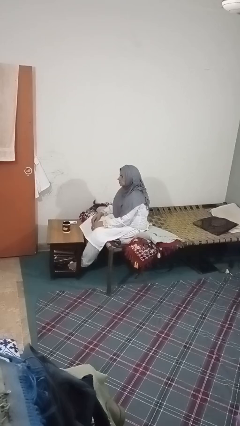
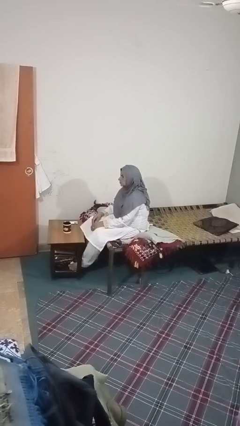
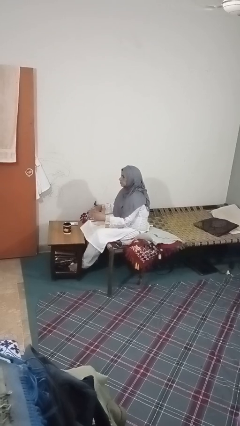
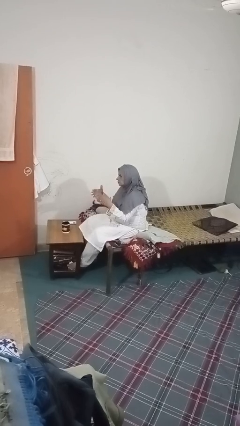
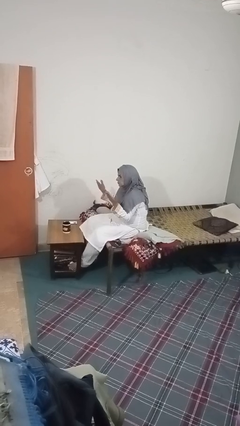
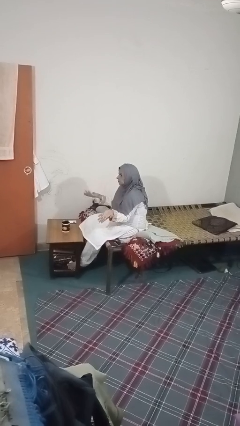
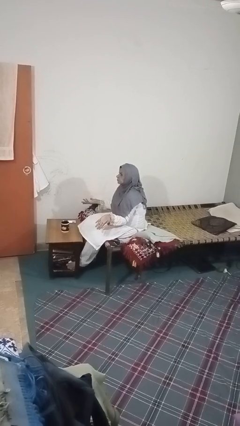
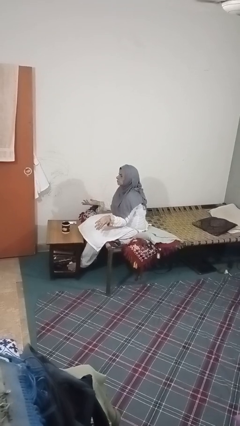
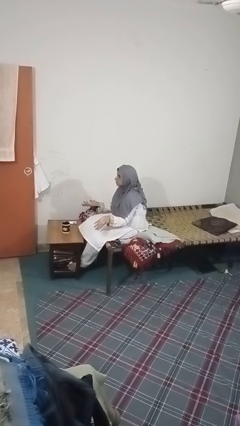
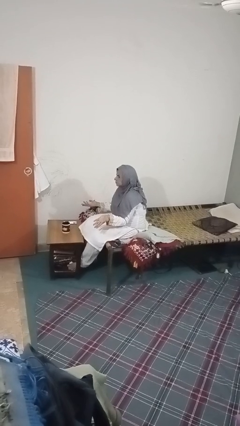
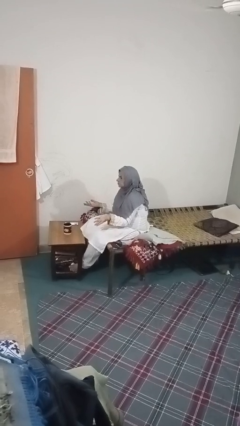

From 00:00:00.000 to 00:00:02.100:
person shrugs

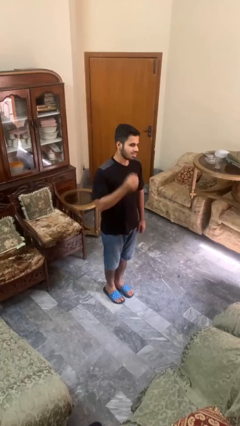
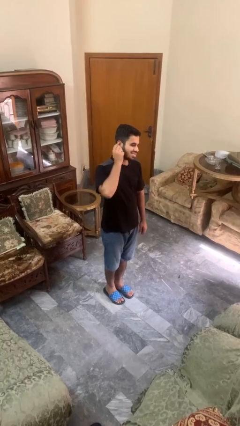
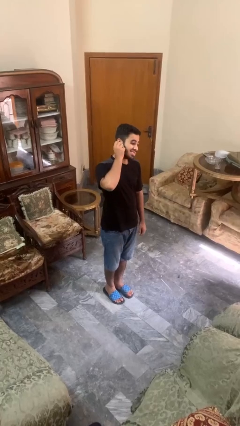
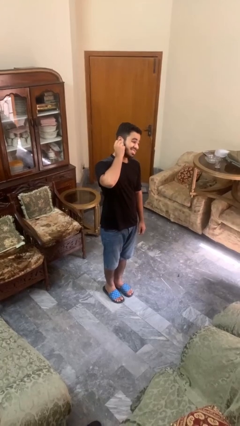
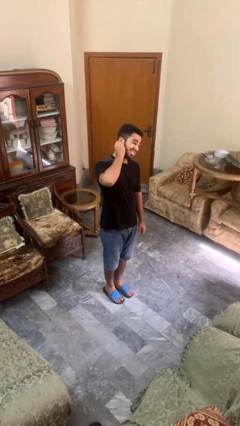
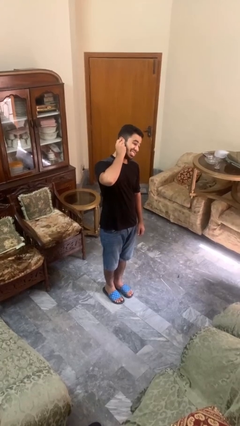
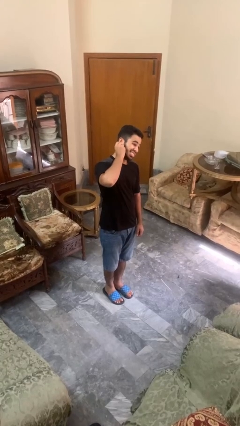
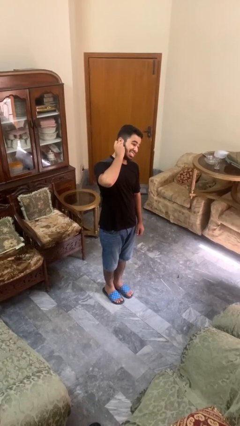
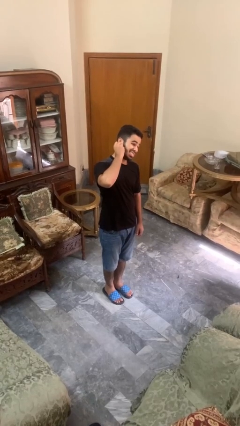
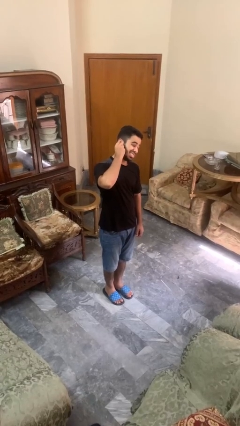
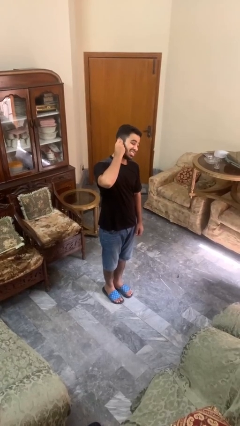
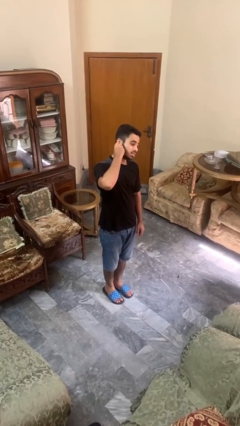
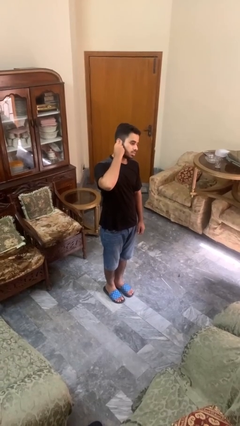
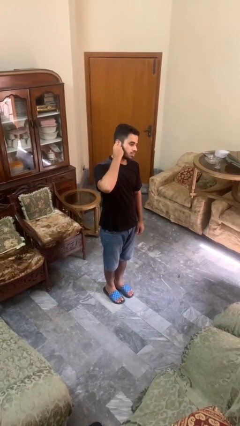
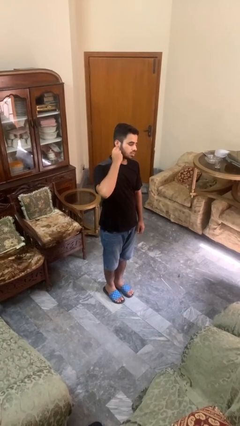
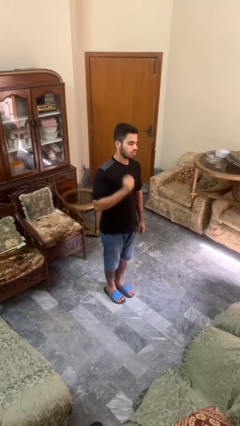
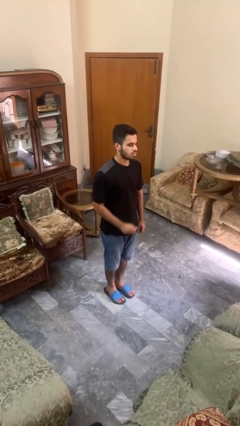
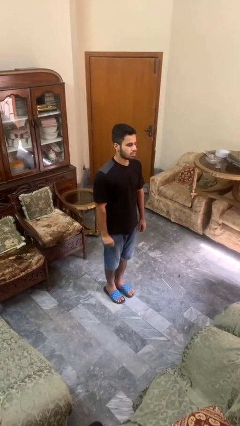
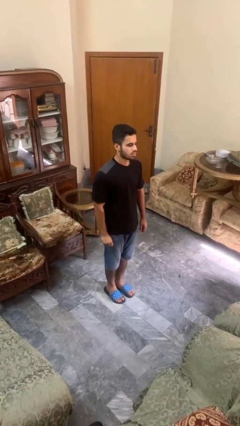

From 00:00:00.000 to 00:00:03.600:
person touches earlobe

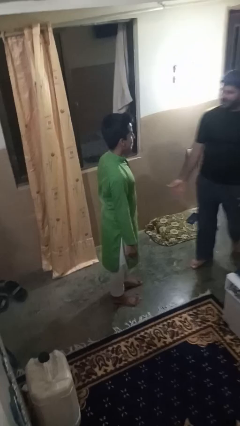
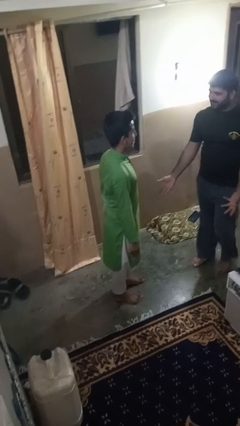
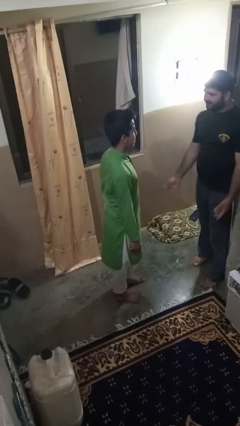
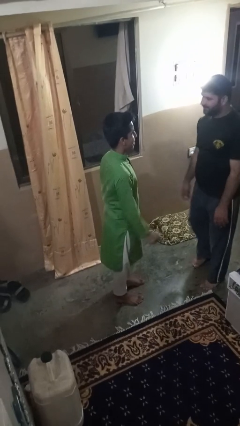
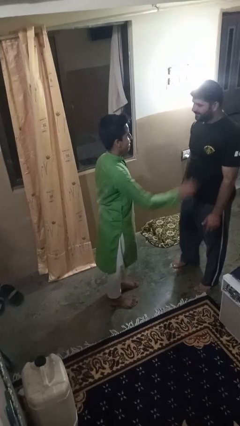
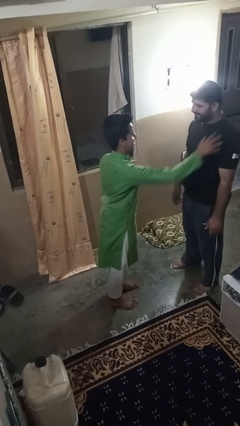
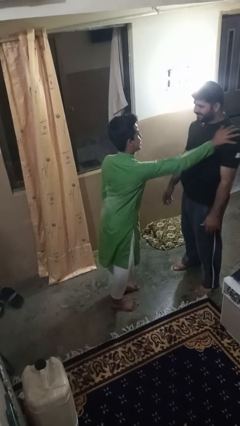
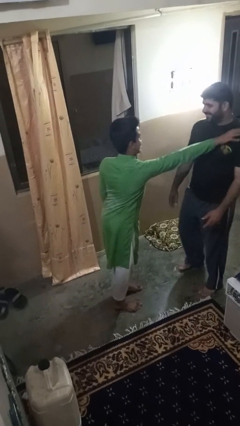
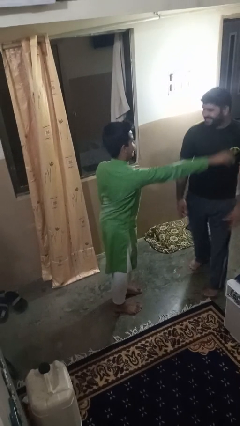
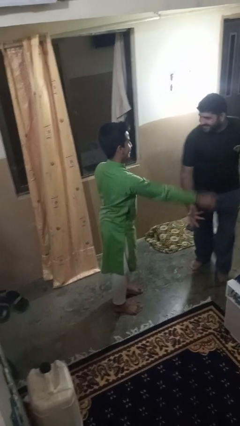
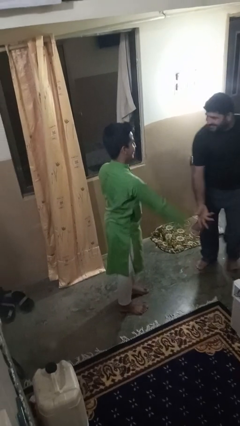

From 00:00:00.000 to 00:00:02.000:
person shoves person

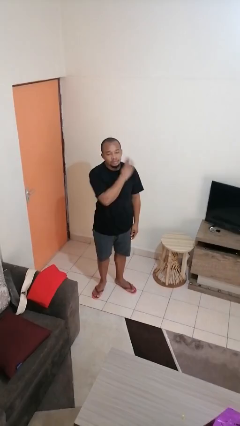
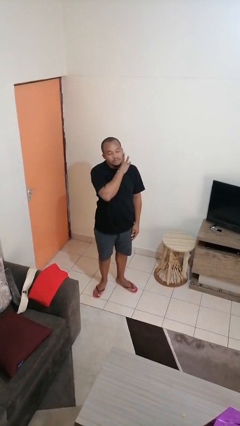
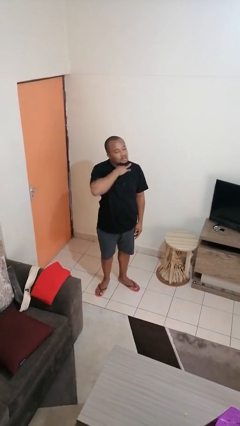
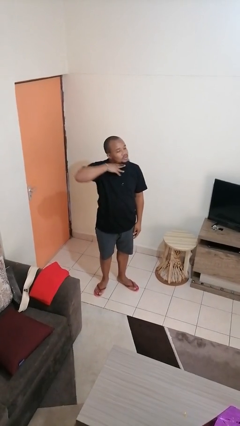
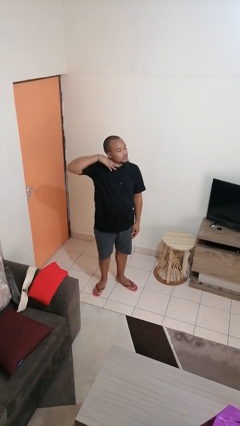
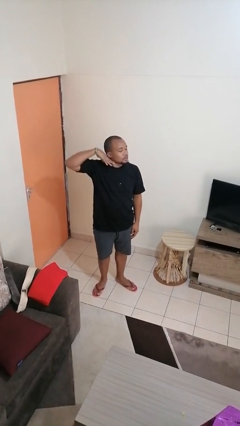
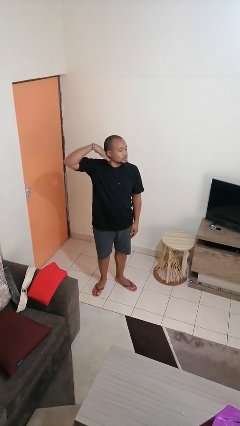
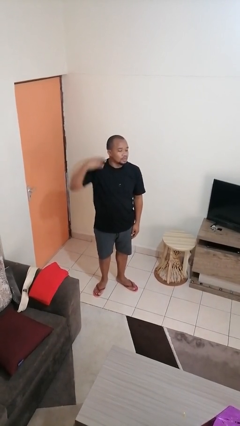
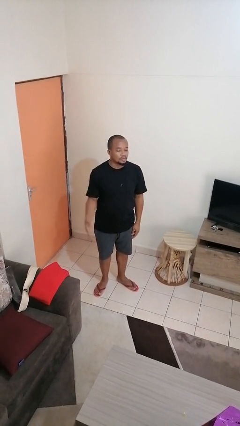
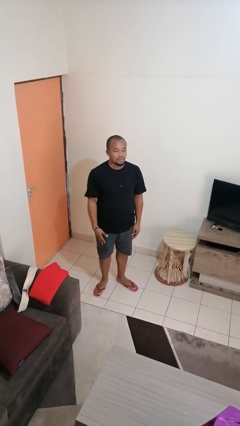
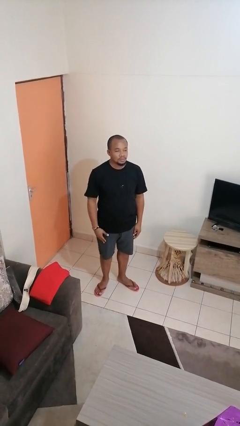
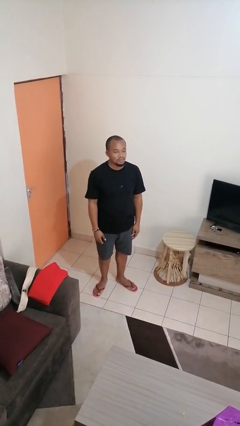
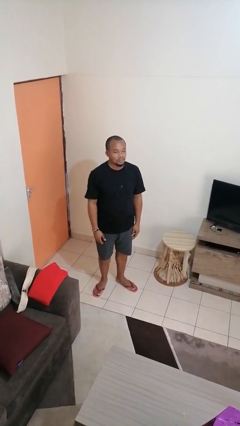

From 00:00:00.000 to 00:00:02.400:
person gestures cut

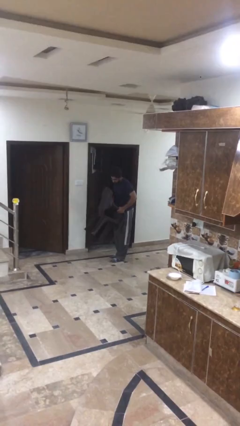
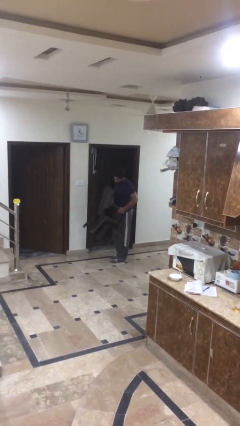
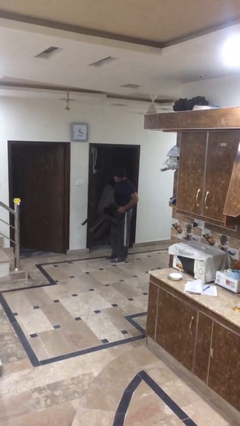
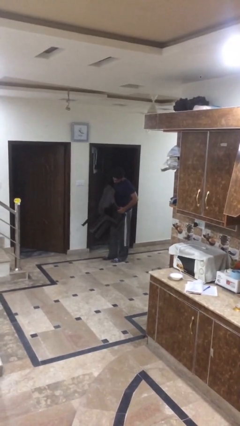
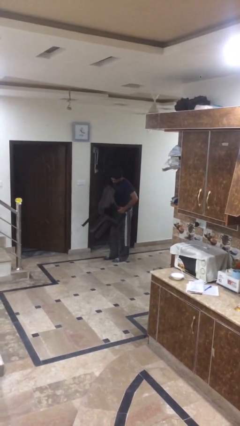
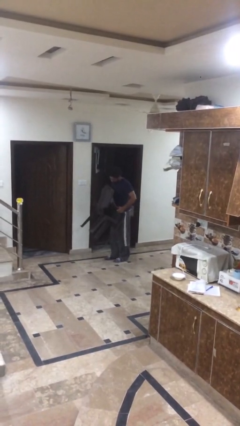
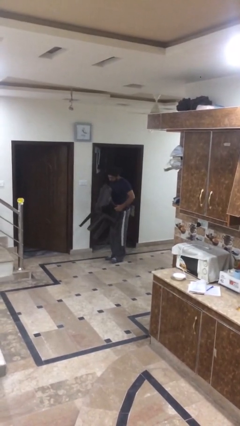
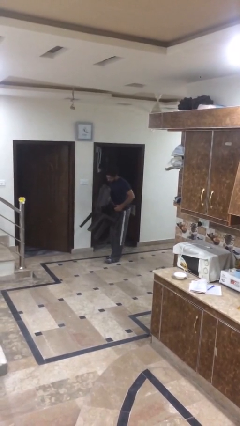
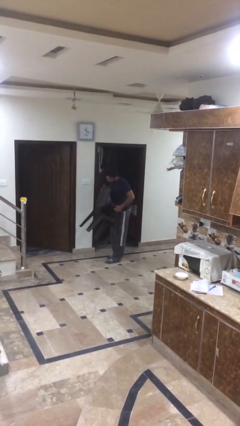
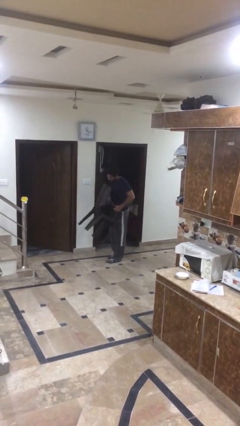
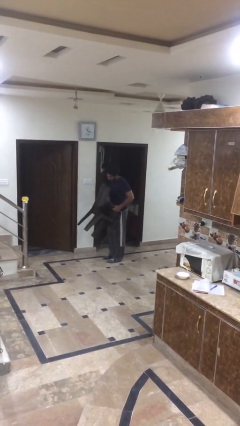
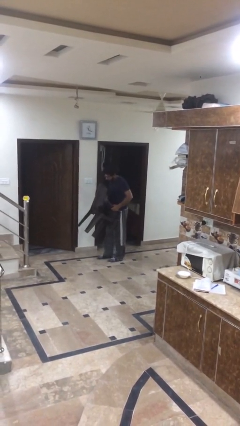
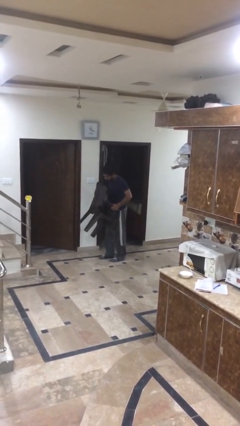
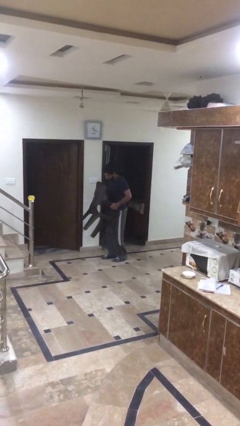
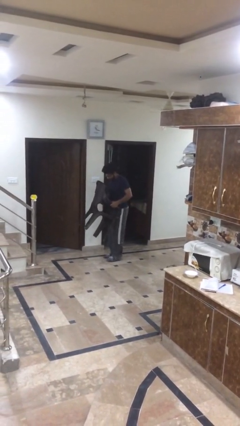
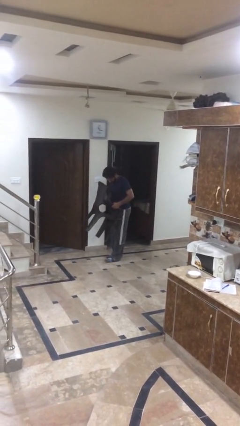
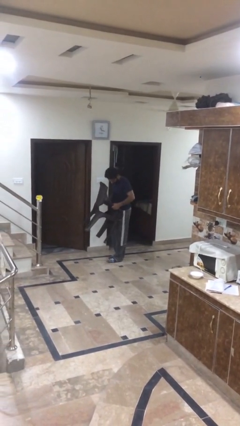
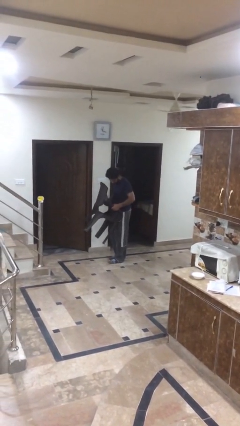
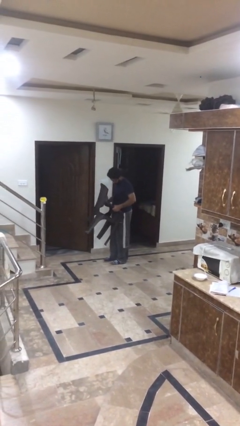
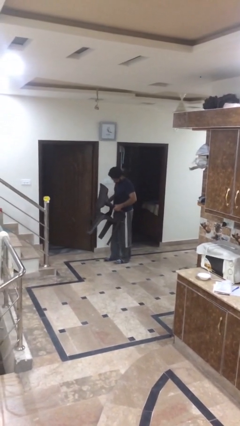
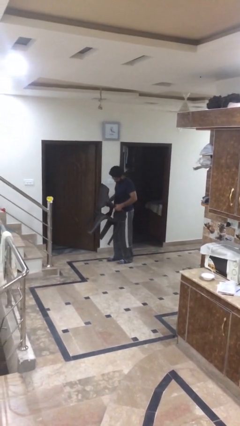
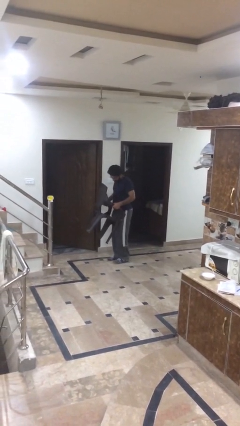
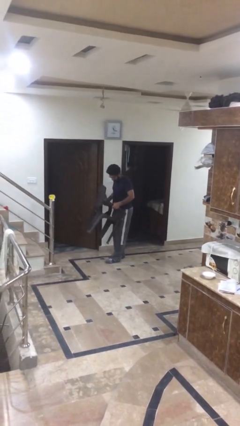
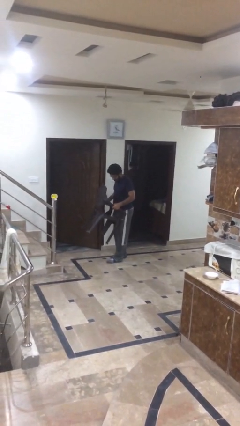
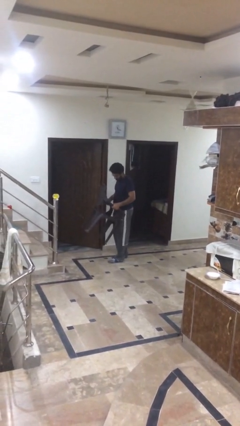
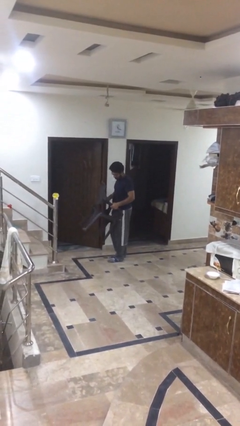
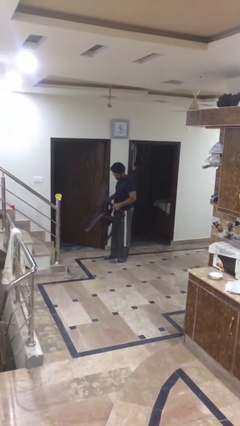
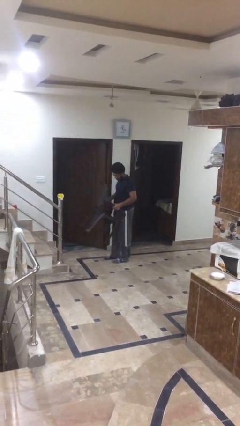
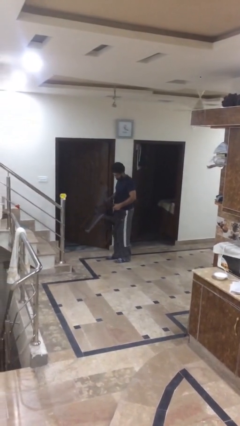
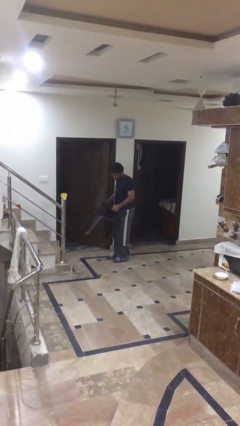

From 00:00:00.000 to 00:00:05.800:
person carries heavy object

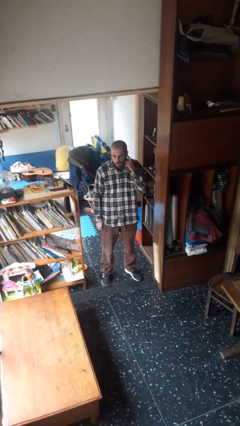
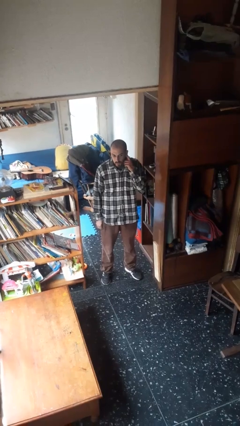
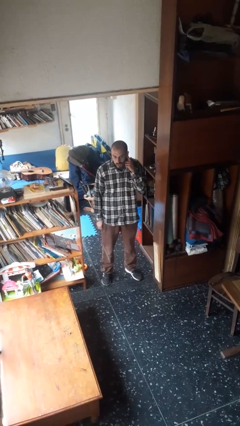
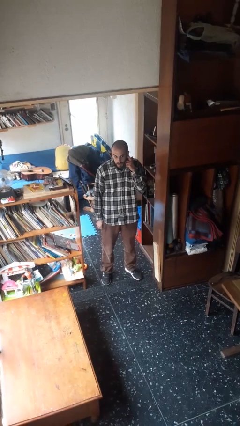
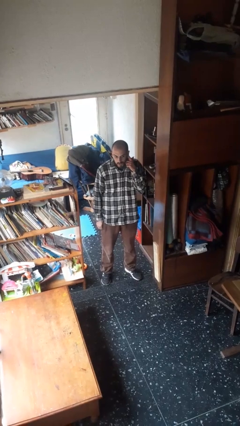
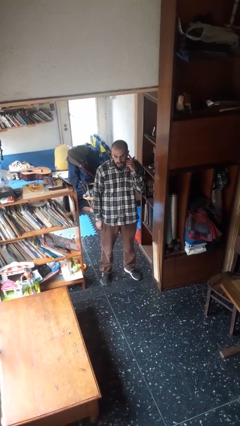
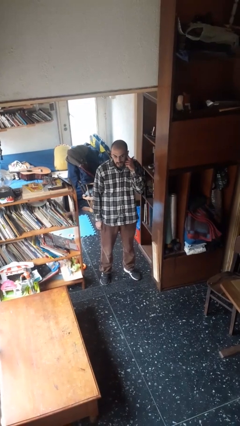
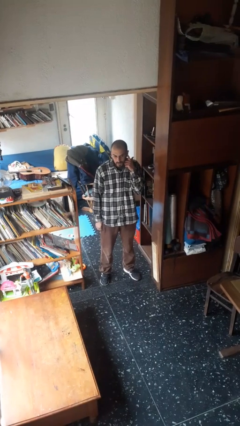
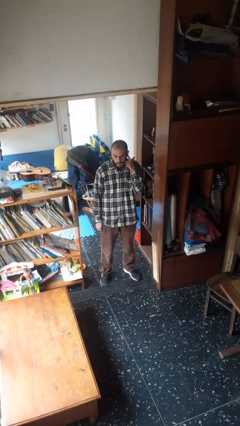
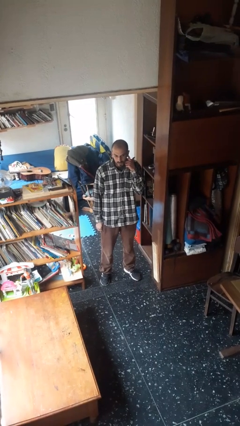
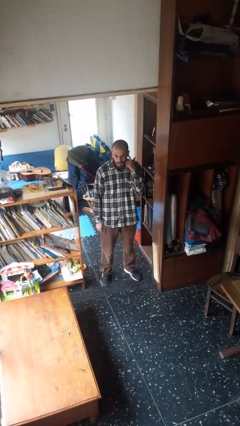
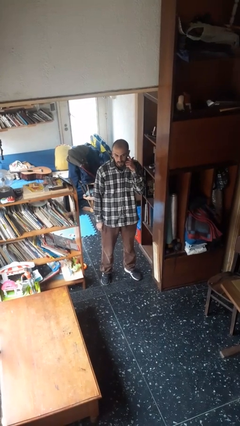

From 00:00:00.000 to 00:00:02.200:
person gestures listen closely
